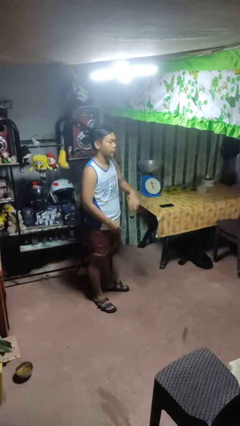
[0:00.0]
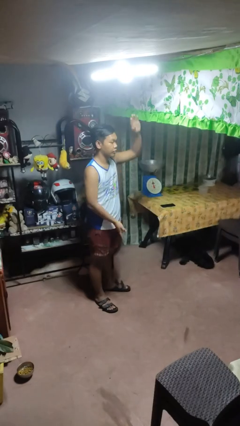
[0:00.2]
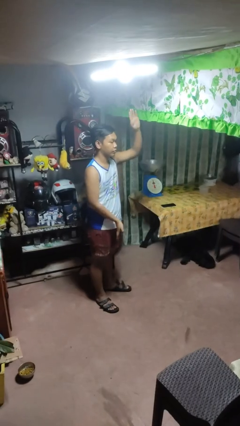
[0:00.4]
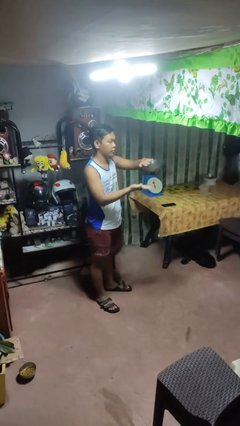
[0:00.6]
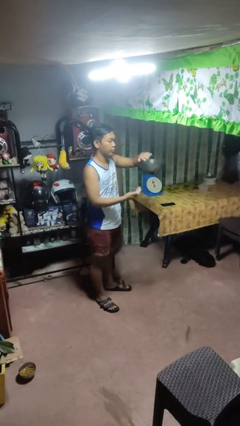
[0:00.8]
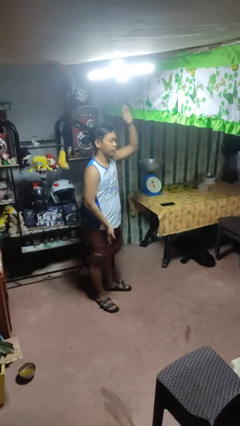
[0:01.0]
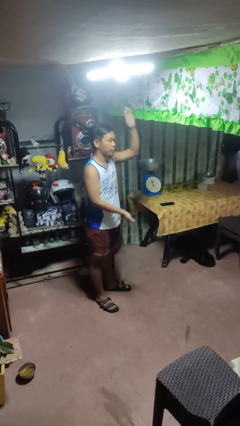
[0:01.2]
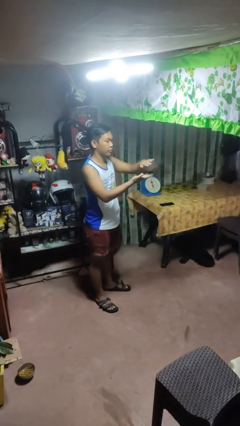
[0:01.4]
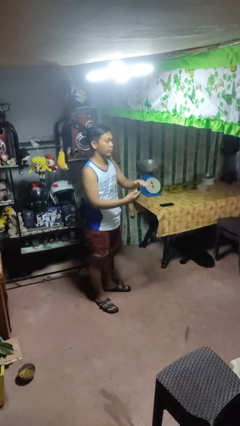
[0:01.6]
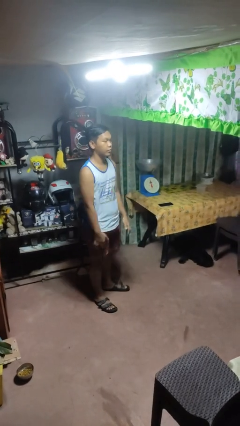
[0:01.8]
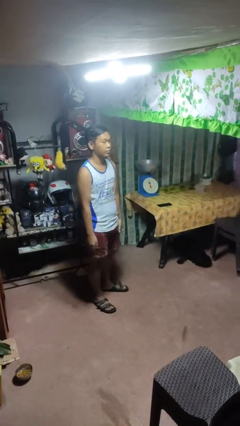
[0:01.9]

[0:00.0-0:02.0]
person gestures zoom out

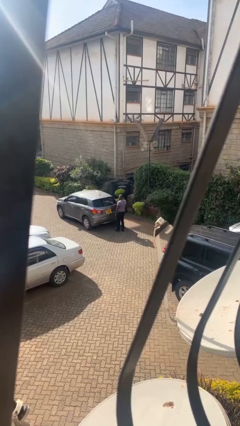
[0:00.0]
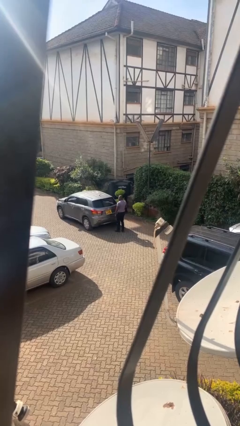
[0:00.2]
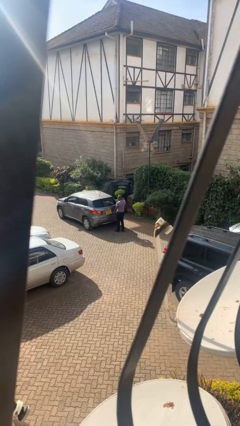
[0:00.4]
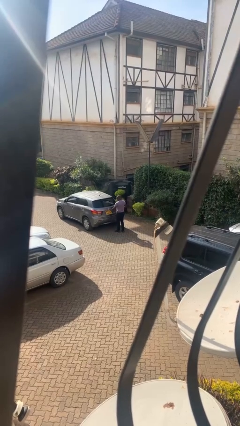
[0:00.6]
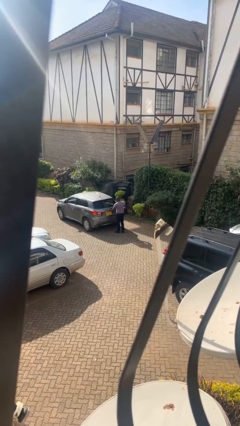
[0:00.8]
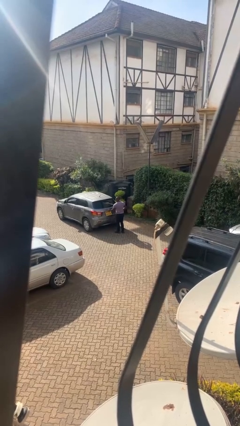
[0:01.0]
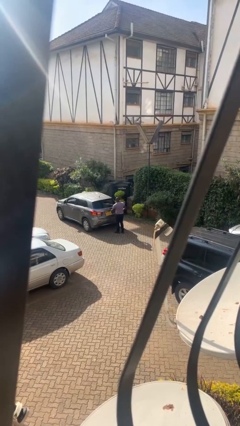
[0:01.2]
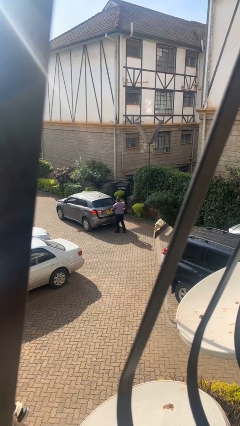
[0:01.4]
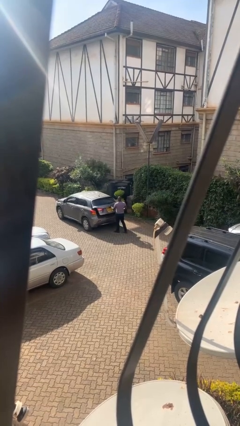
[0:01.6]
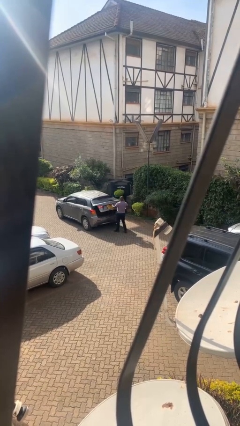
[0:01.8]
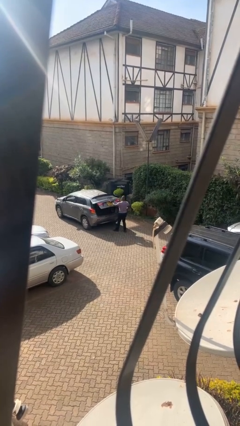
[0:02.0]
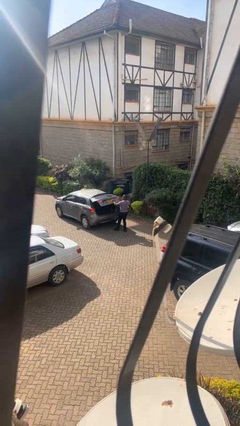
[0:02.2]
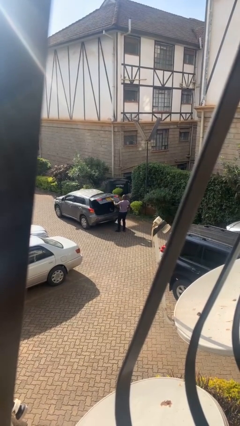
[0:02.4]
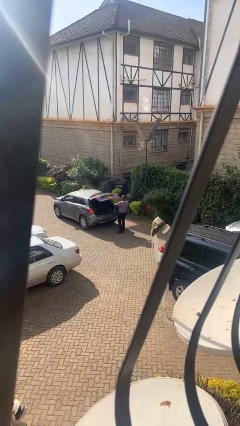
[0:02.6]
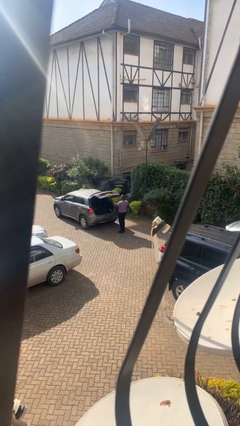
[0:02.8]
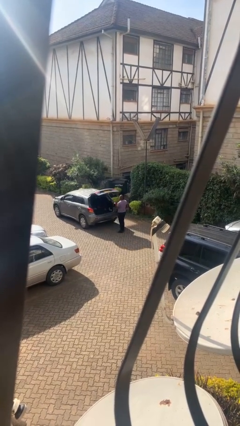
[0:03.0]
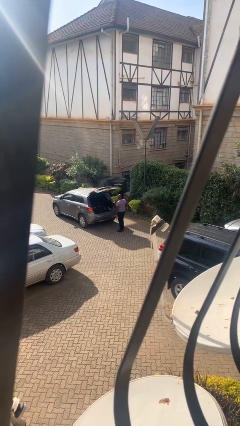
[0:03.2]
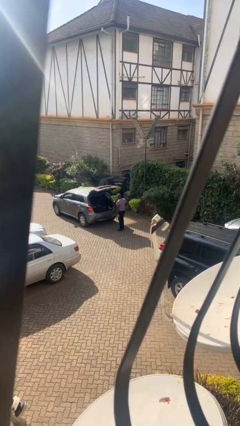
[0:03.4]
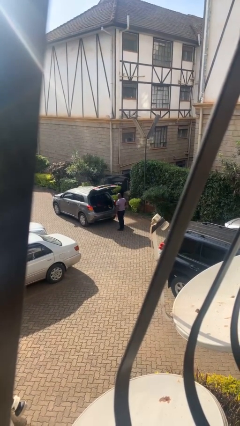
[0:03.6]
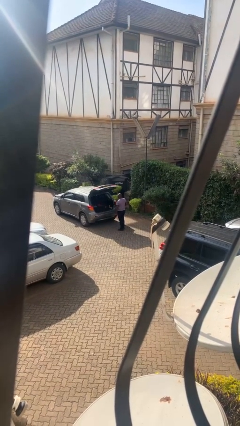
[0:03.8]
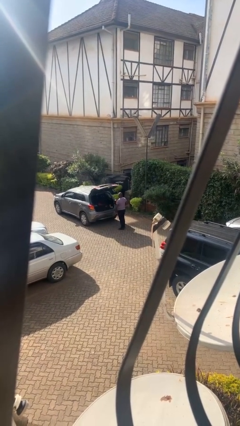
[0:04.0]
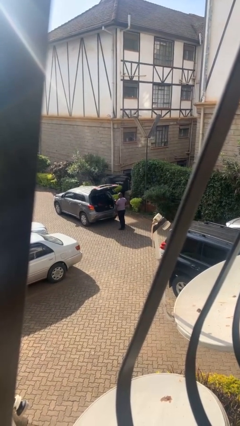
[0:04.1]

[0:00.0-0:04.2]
person opens car trunk

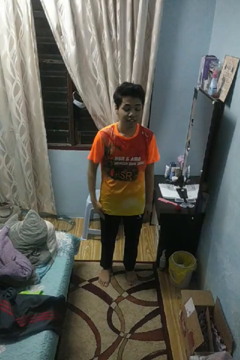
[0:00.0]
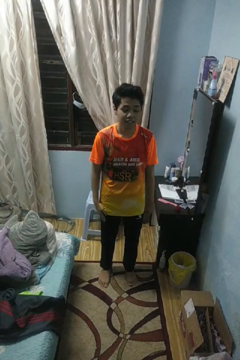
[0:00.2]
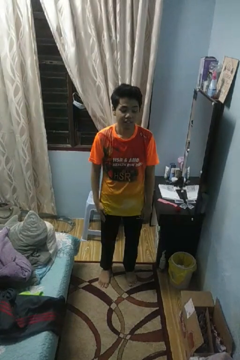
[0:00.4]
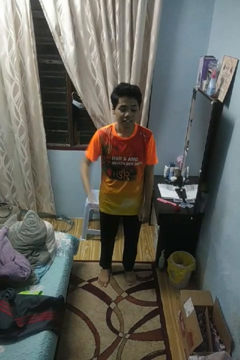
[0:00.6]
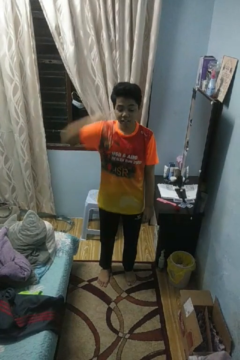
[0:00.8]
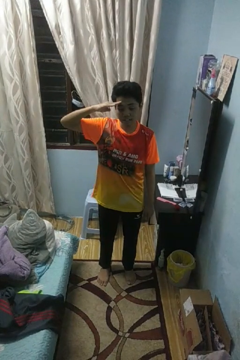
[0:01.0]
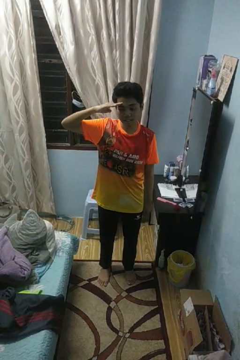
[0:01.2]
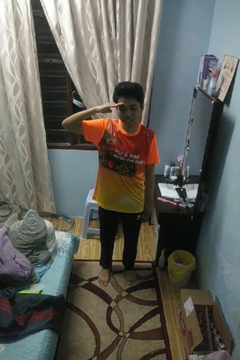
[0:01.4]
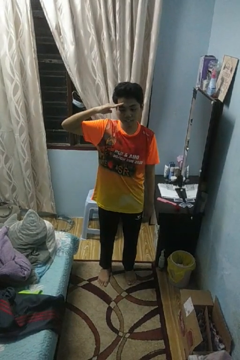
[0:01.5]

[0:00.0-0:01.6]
person salutes

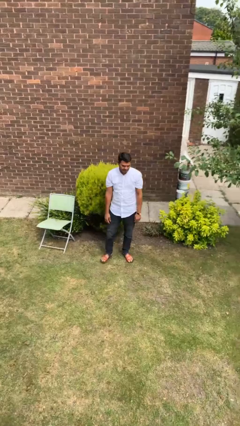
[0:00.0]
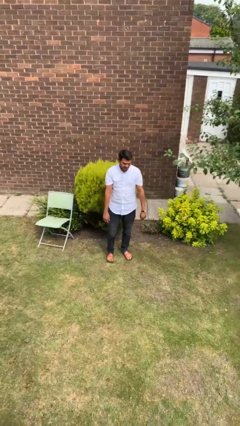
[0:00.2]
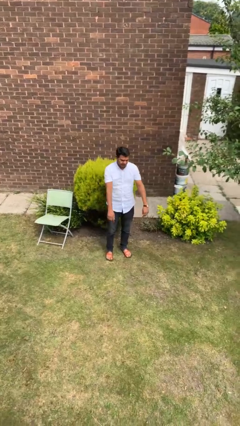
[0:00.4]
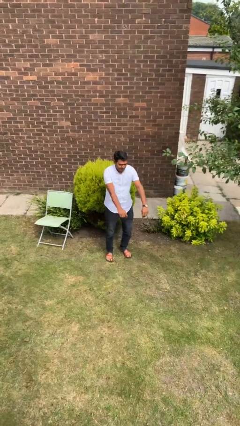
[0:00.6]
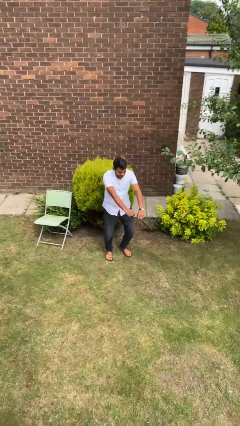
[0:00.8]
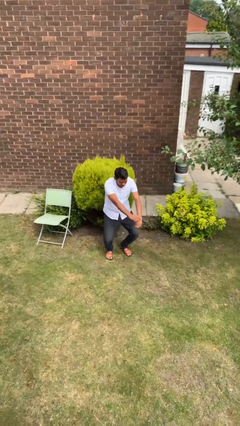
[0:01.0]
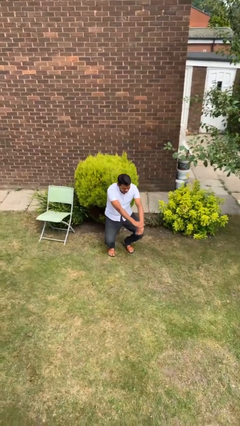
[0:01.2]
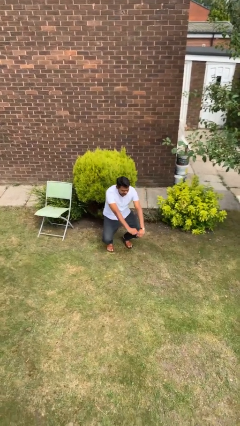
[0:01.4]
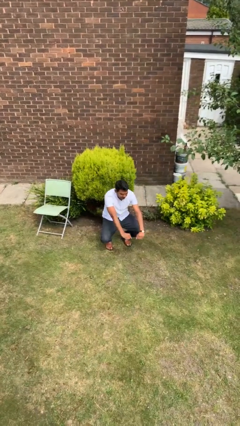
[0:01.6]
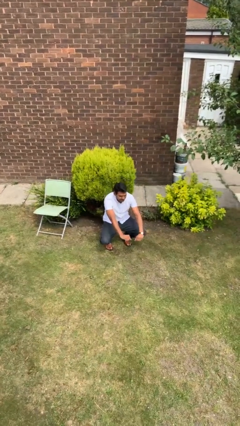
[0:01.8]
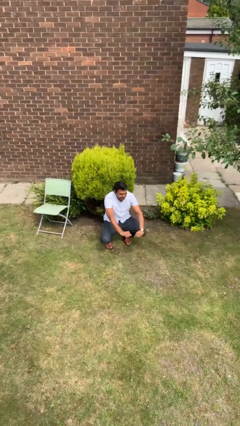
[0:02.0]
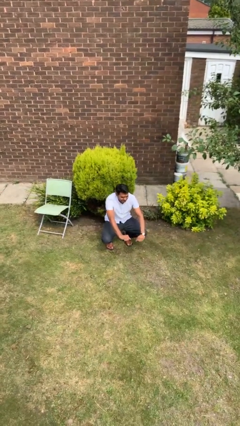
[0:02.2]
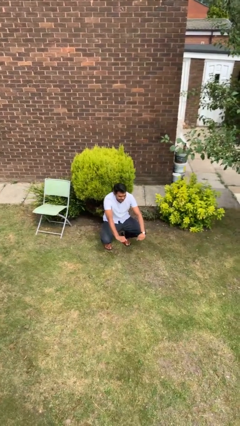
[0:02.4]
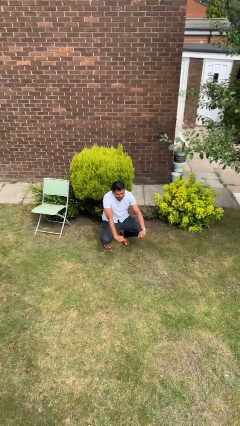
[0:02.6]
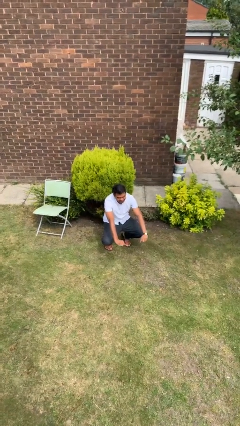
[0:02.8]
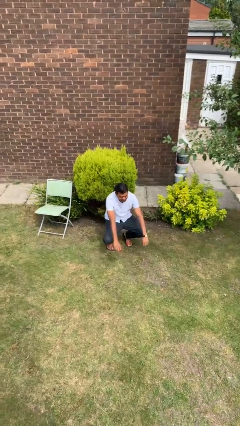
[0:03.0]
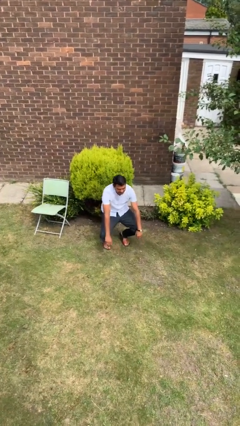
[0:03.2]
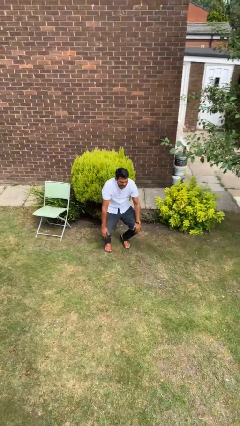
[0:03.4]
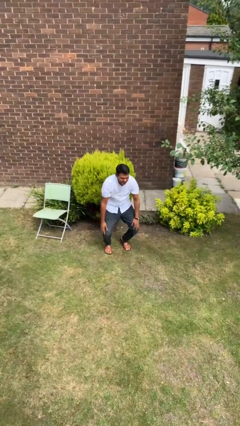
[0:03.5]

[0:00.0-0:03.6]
person squats

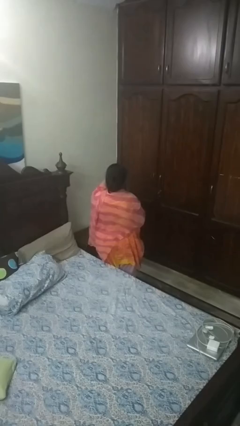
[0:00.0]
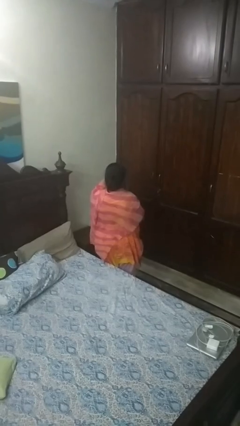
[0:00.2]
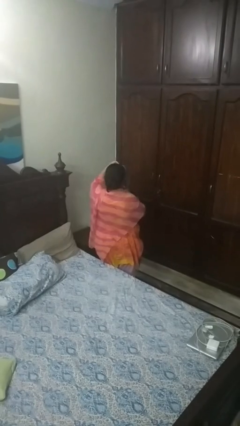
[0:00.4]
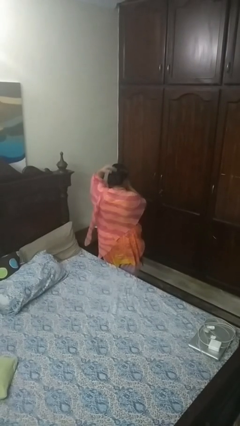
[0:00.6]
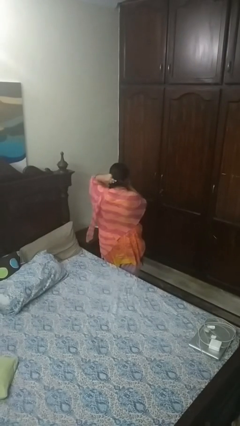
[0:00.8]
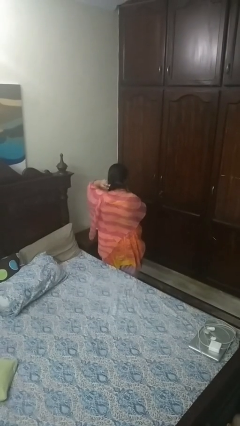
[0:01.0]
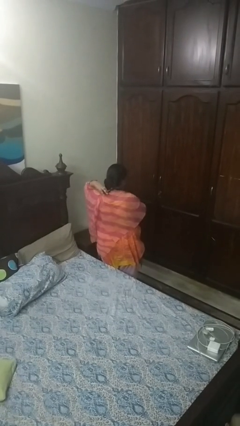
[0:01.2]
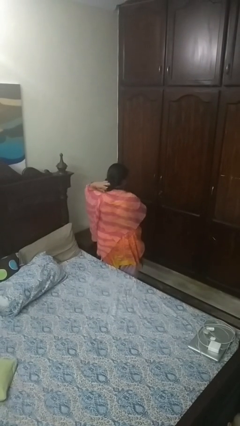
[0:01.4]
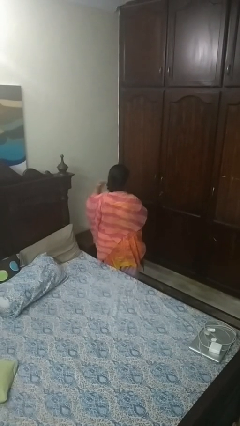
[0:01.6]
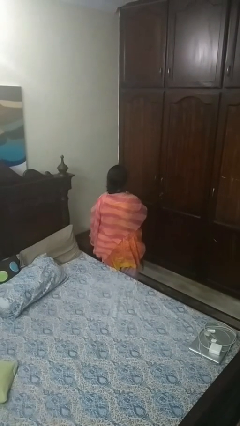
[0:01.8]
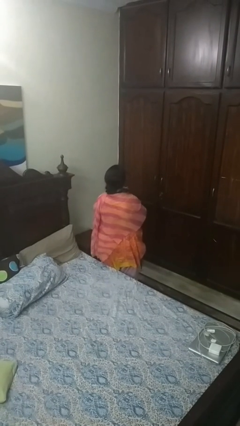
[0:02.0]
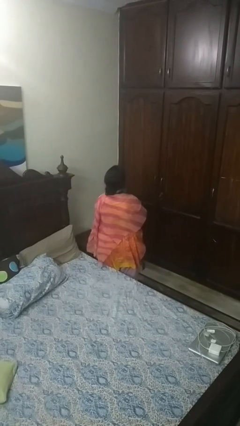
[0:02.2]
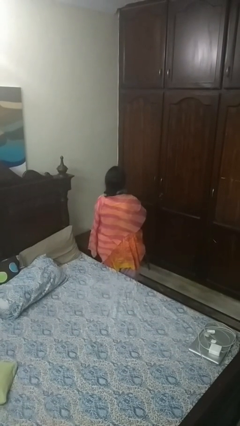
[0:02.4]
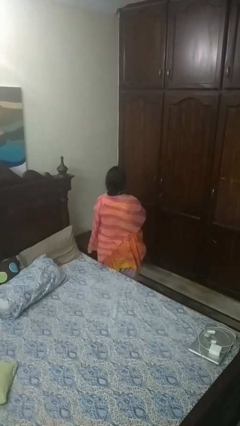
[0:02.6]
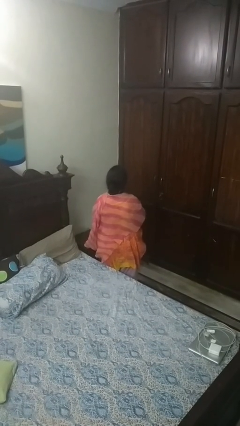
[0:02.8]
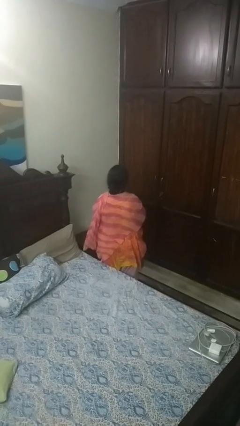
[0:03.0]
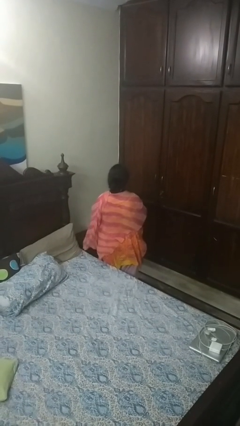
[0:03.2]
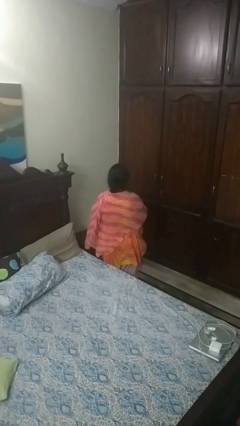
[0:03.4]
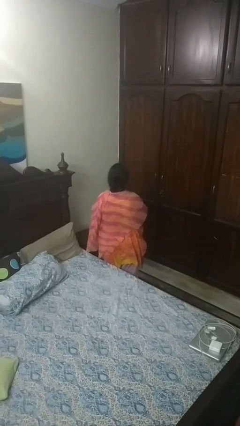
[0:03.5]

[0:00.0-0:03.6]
person puts on necktie

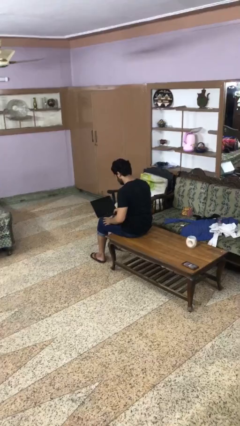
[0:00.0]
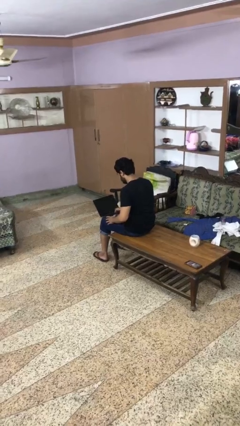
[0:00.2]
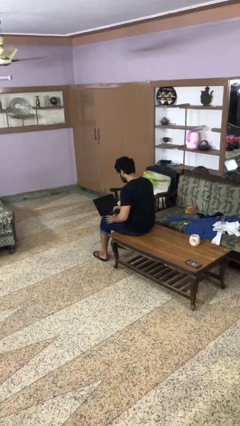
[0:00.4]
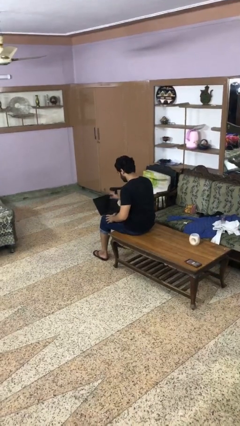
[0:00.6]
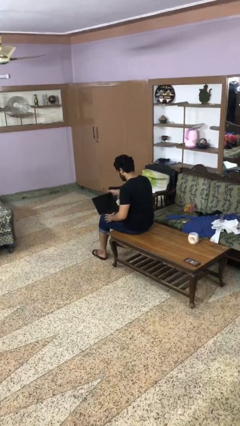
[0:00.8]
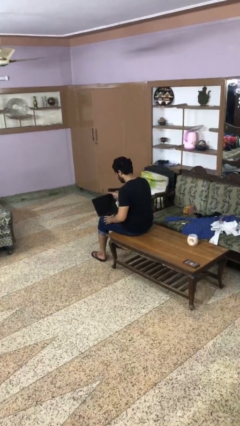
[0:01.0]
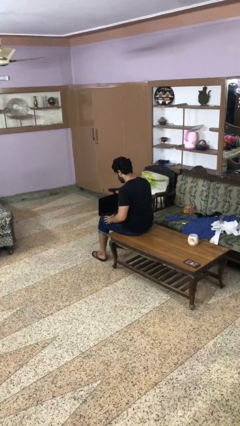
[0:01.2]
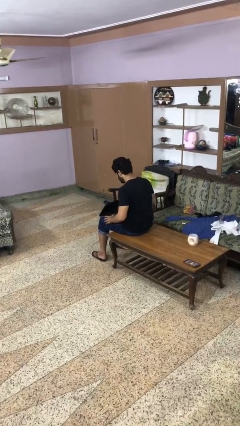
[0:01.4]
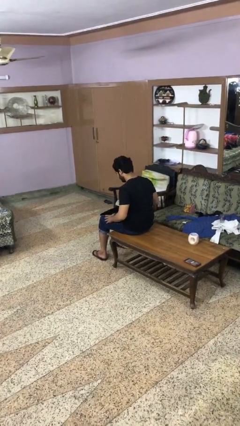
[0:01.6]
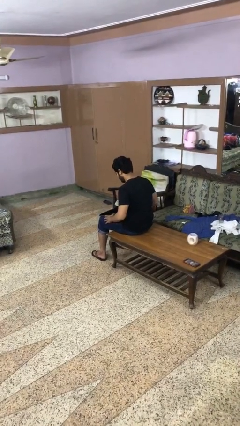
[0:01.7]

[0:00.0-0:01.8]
person closes laptop

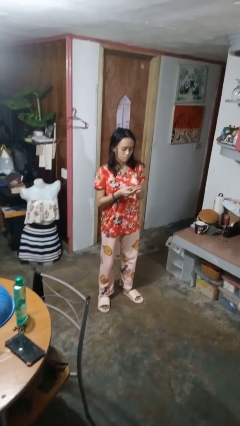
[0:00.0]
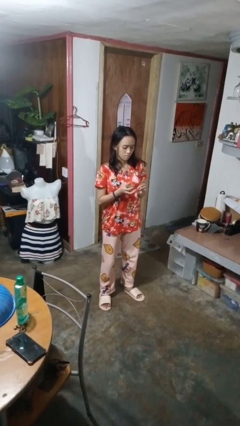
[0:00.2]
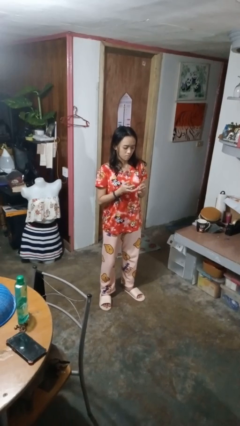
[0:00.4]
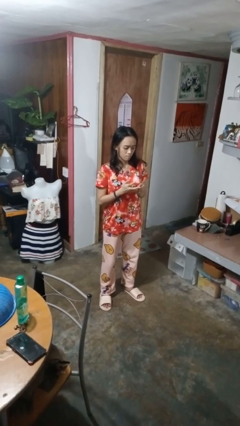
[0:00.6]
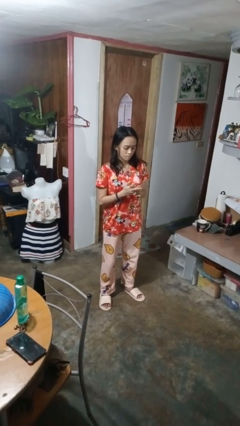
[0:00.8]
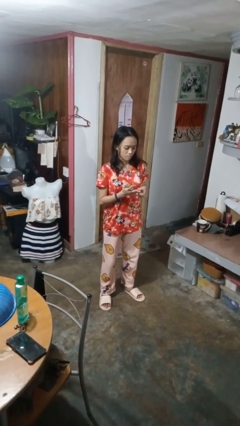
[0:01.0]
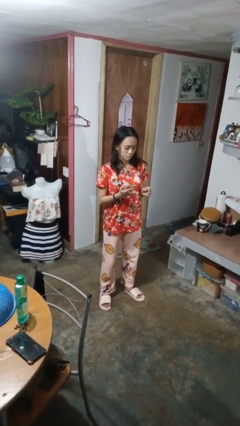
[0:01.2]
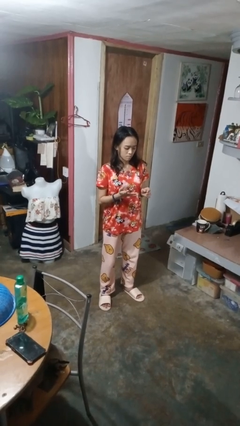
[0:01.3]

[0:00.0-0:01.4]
person puts on ring
